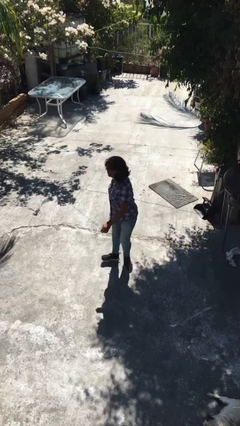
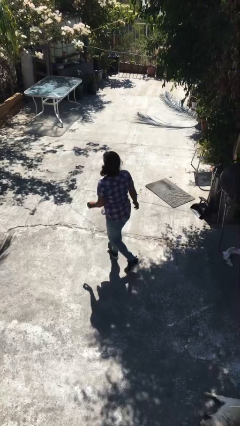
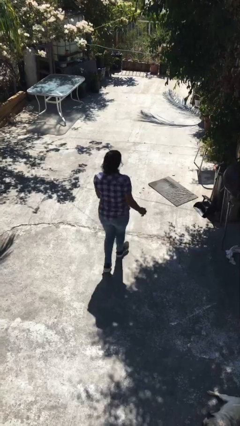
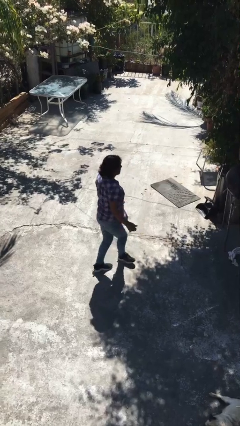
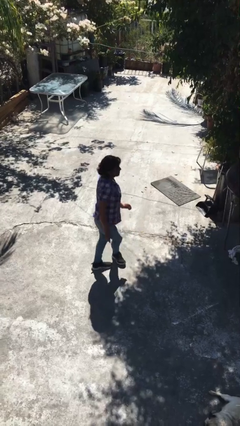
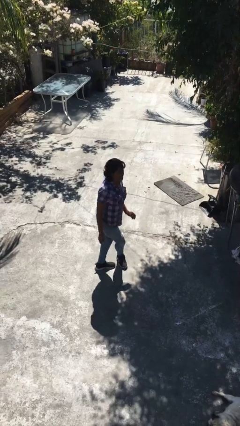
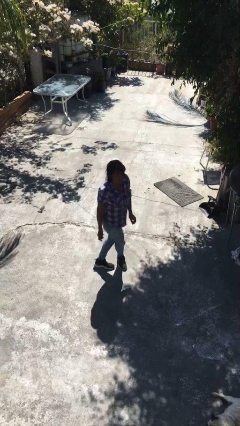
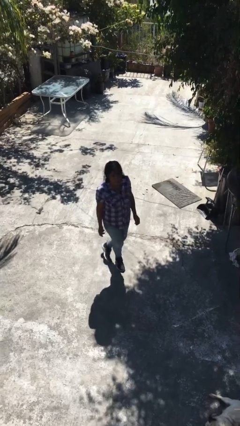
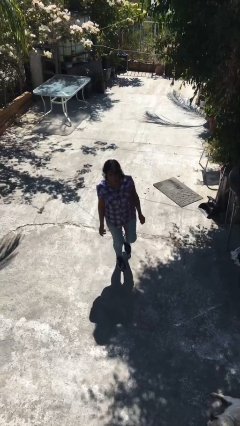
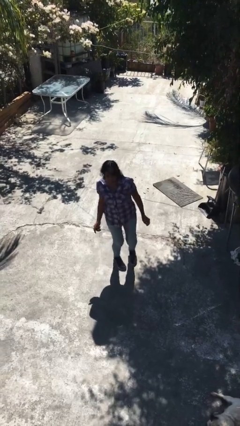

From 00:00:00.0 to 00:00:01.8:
person twirls

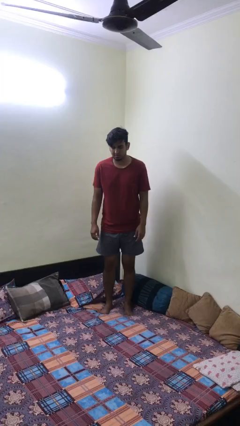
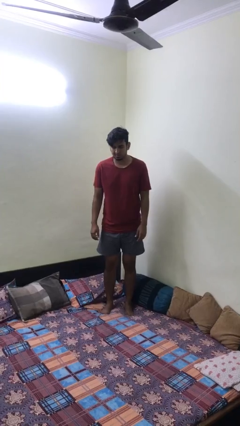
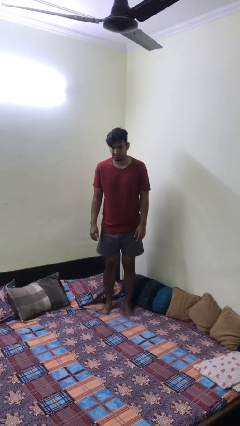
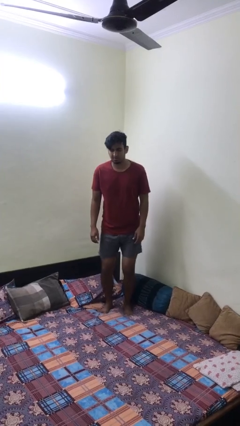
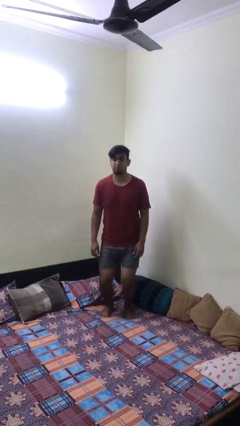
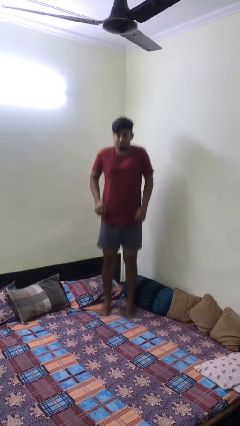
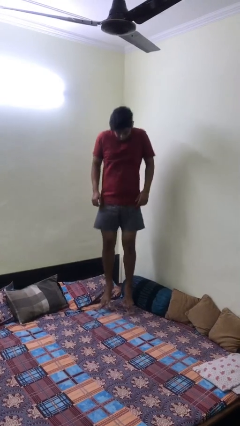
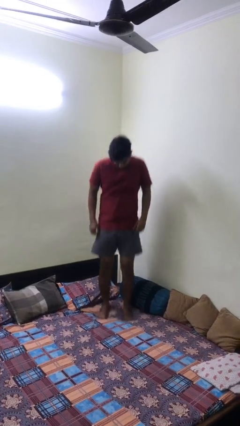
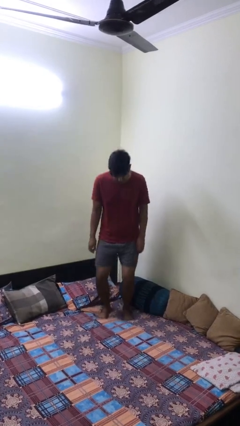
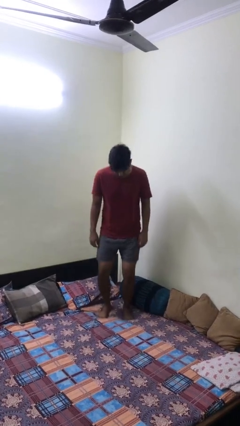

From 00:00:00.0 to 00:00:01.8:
person jumps on bed

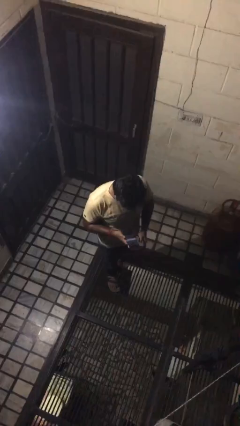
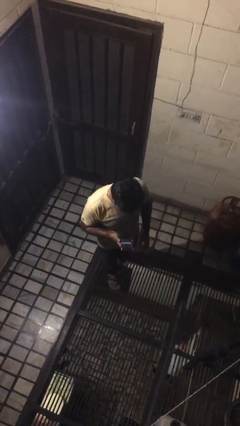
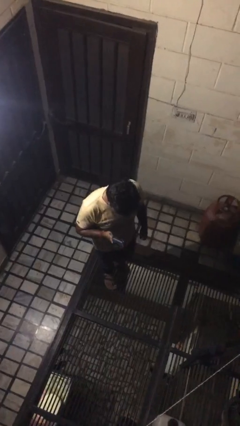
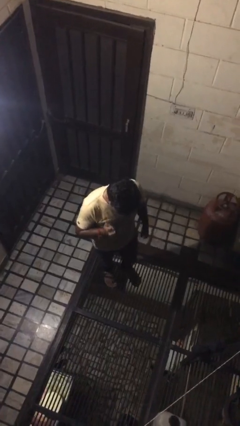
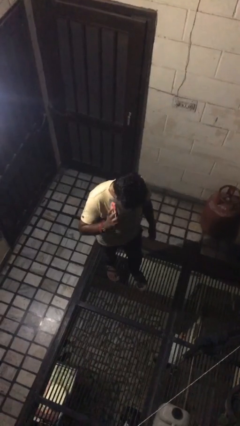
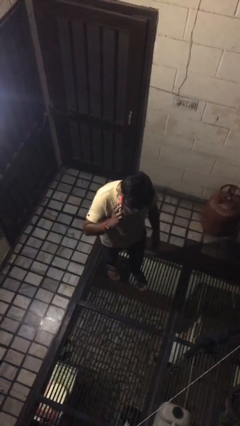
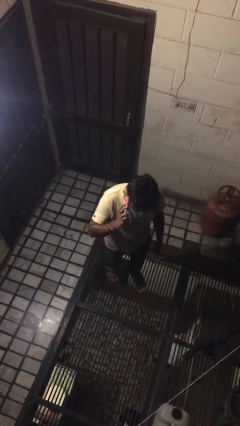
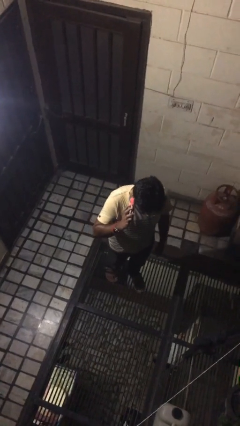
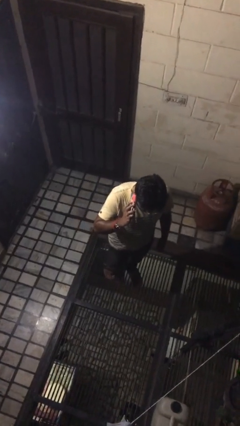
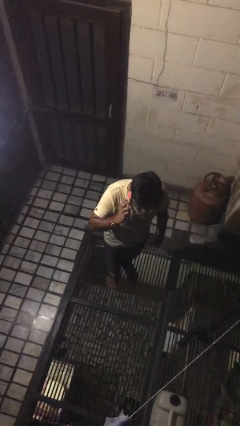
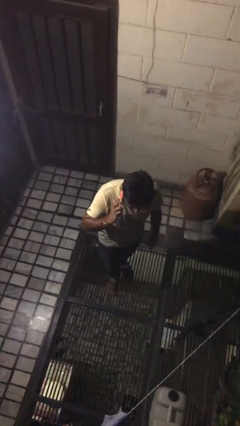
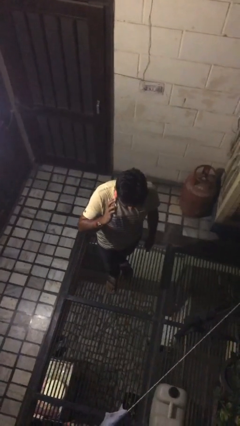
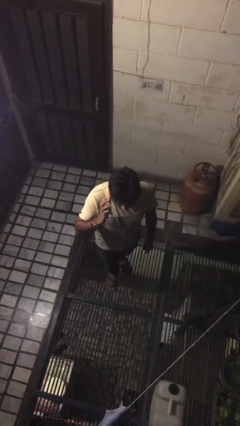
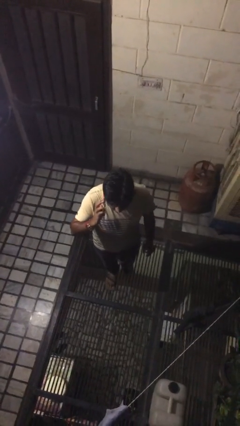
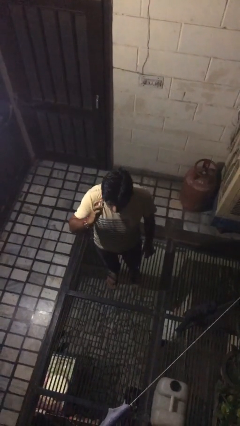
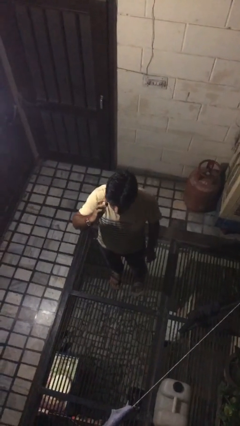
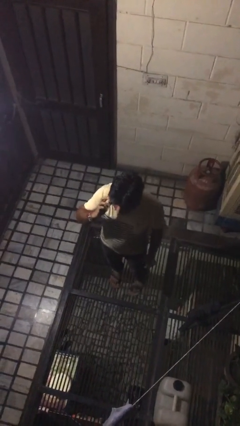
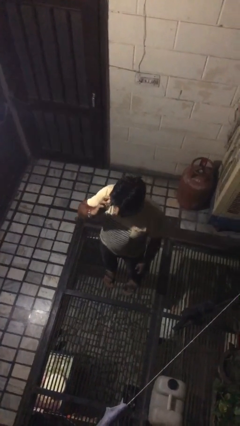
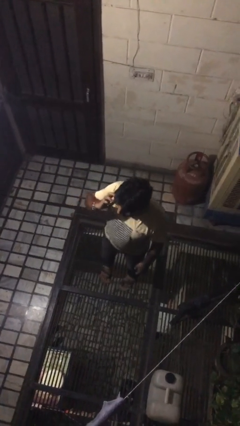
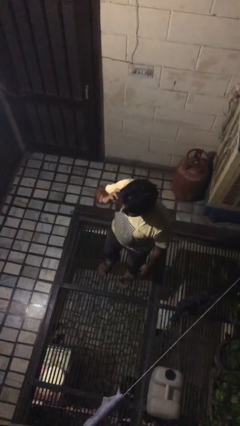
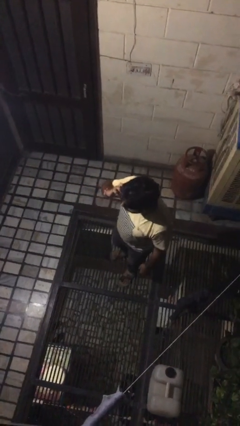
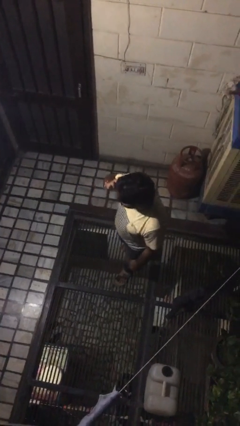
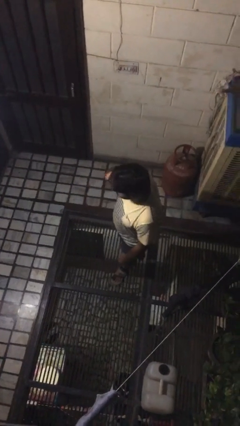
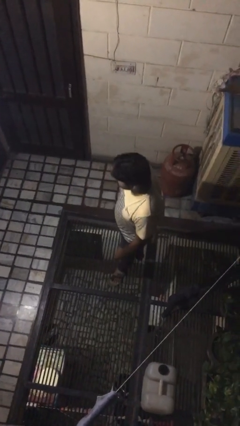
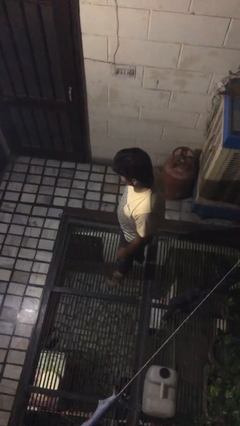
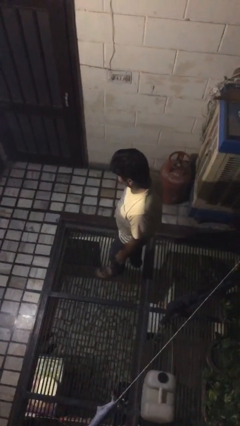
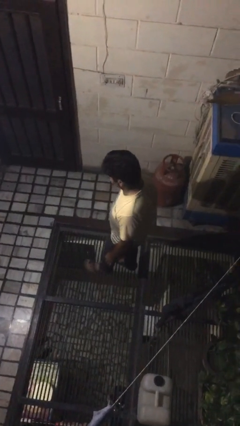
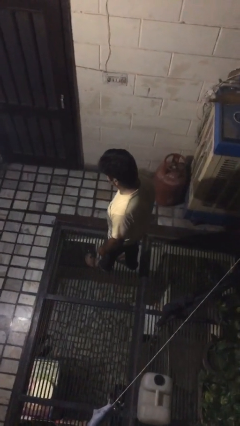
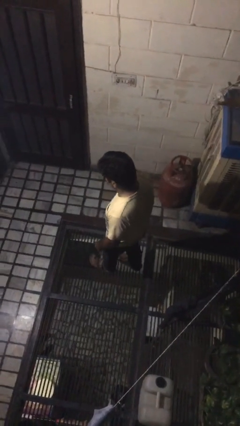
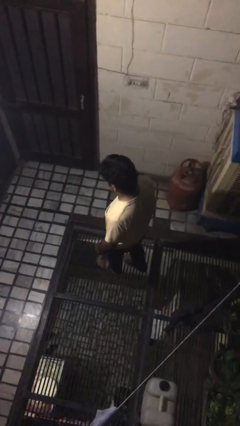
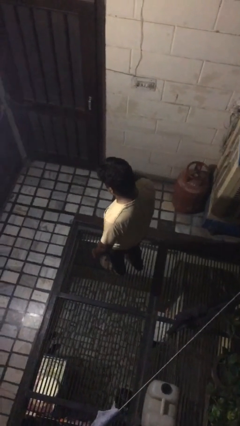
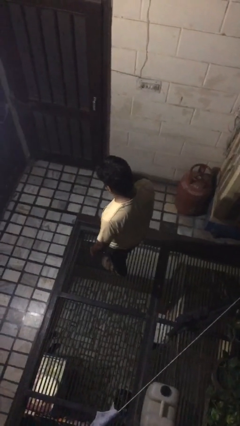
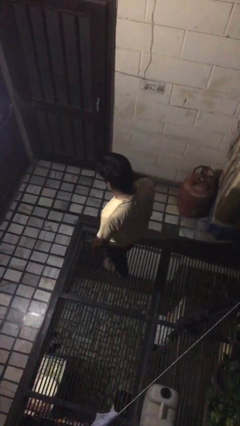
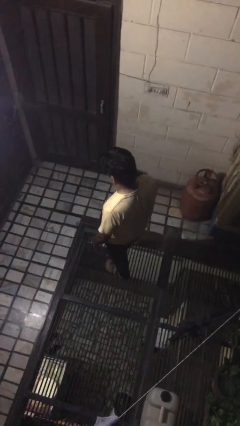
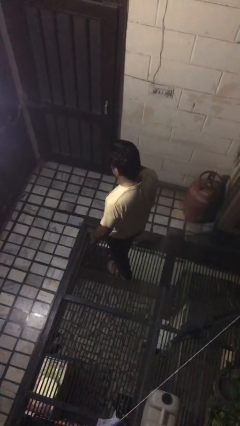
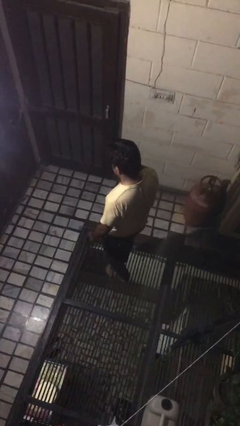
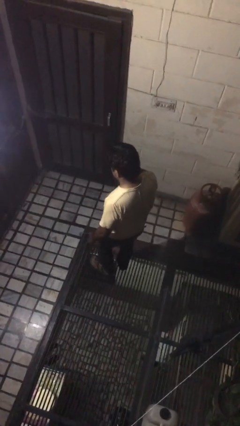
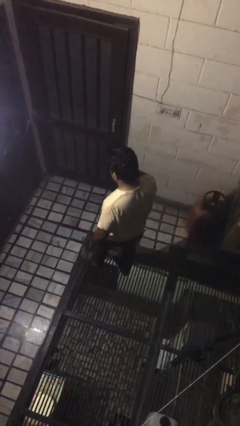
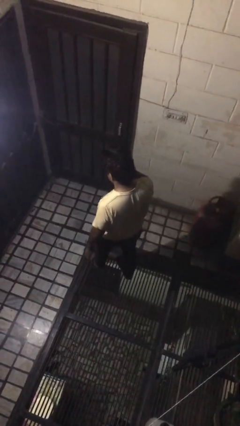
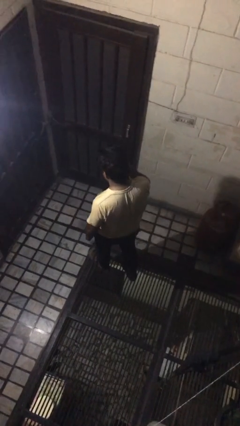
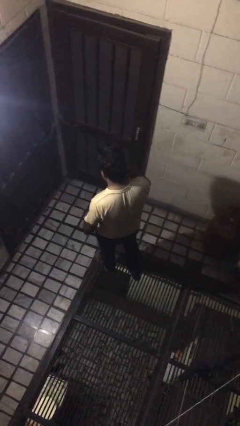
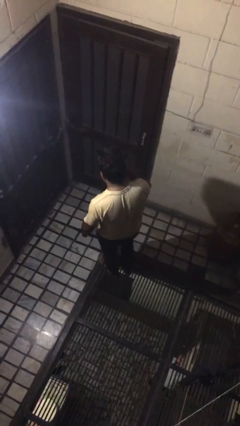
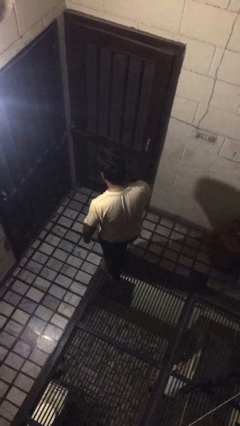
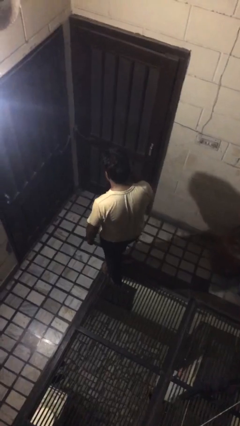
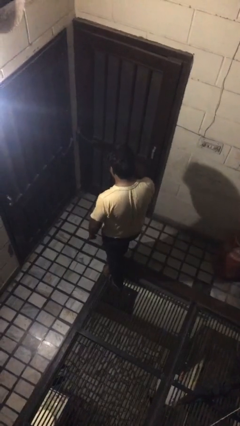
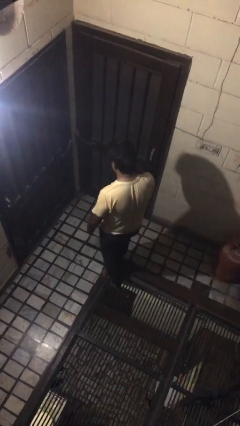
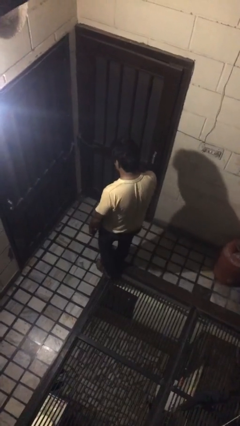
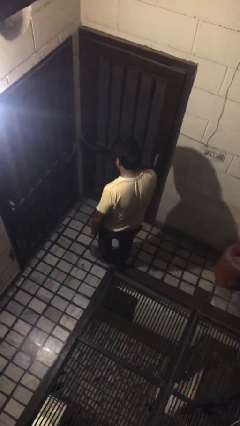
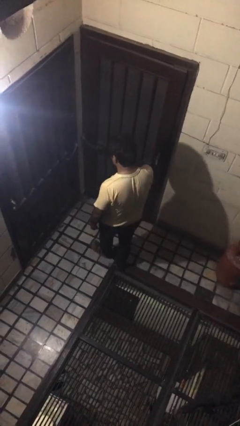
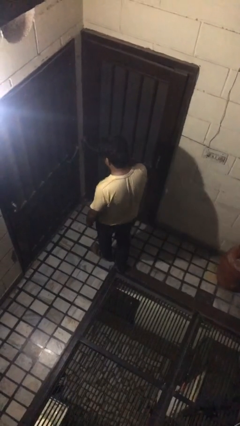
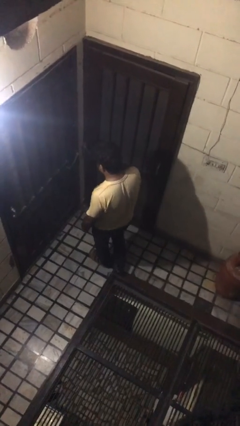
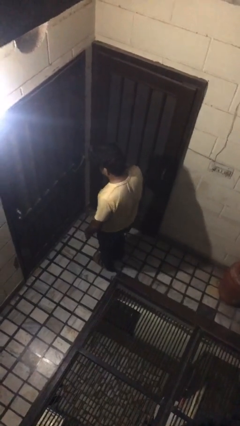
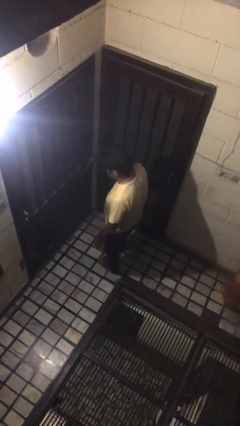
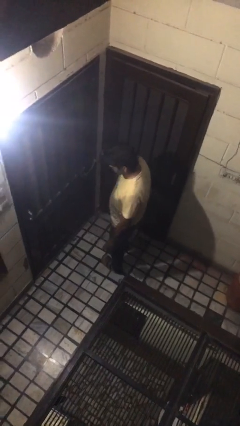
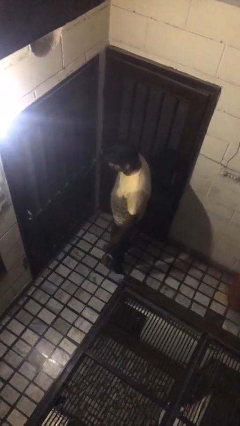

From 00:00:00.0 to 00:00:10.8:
person talks on phone

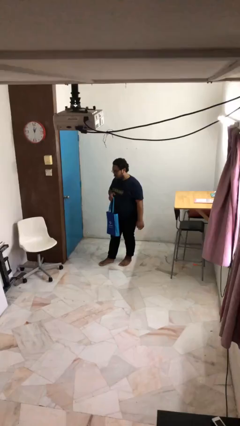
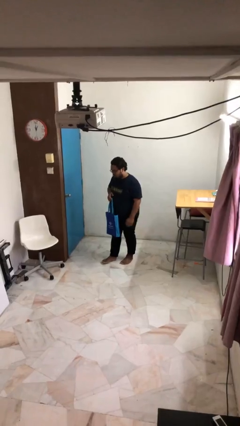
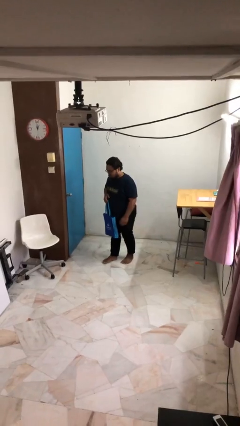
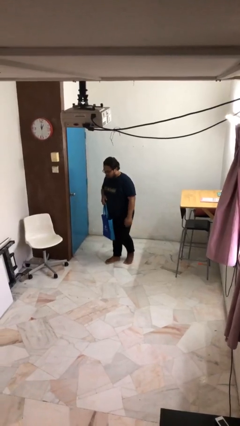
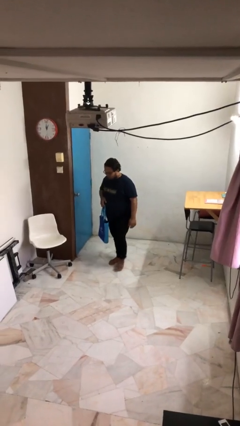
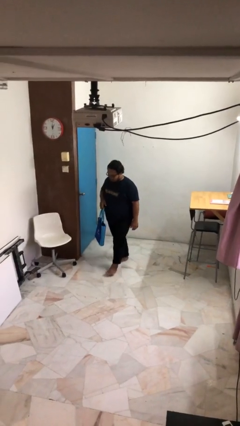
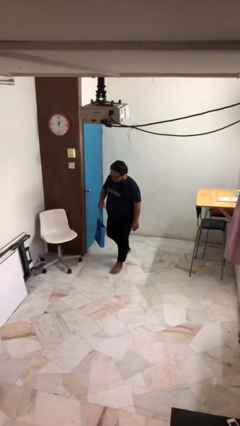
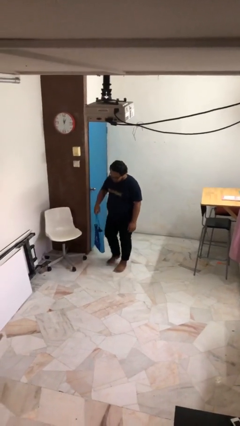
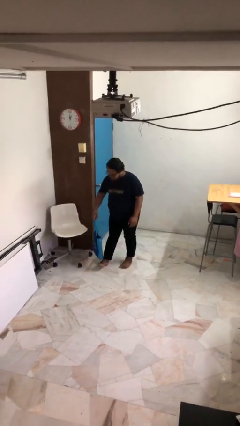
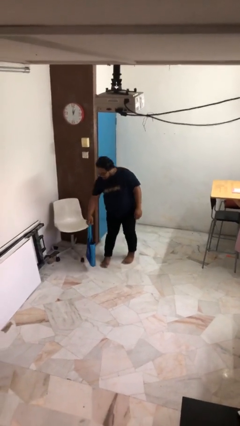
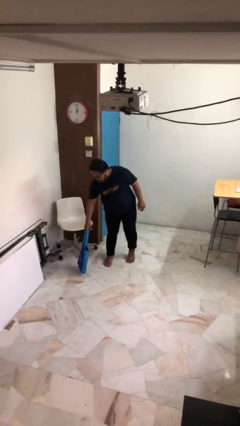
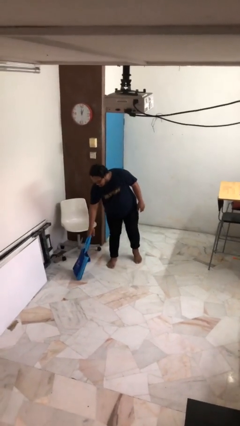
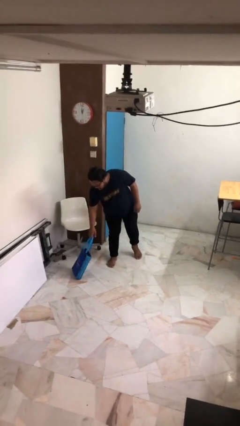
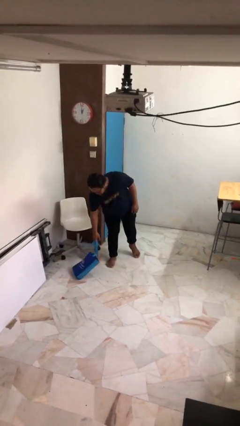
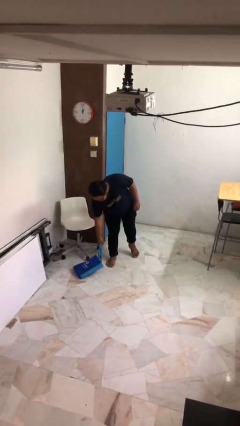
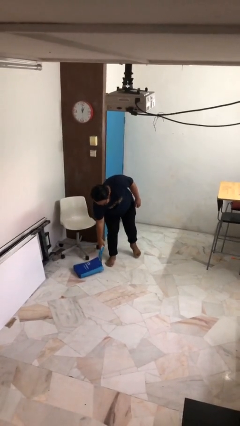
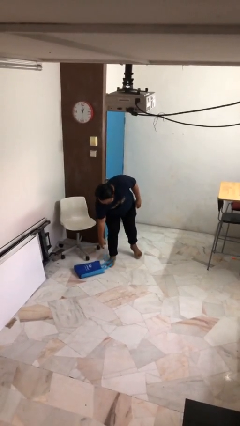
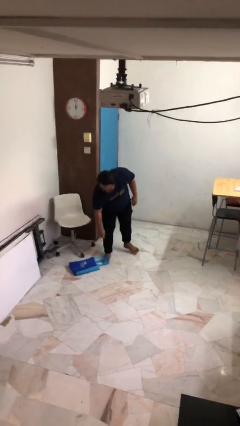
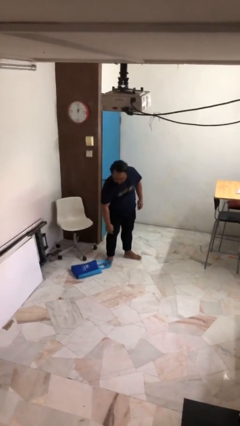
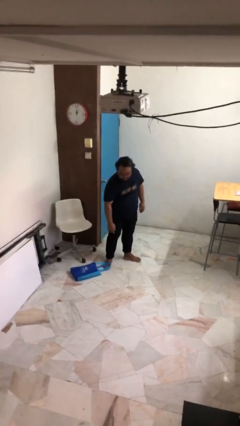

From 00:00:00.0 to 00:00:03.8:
person puts down object on floor
